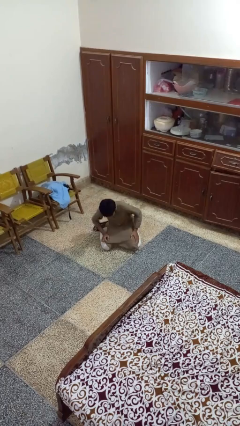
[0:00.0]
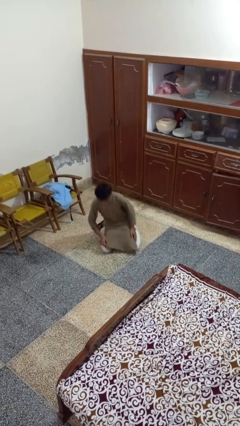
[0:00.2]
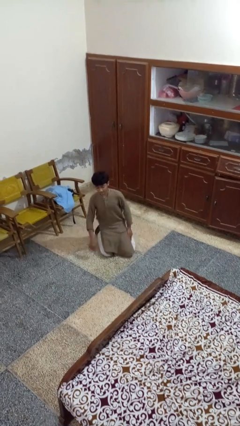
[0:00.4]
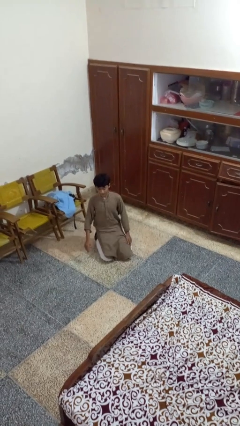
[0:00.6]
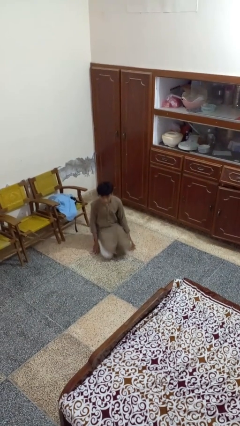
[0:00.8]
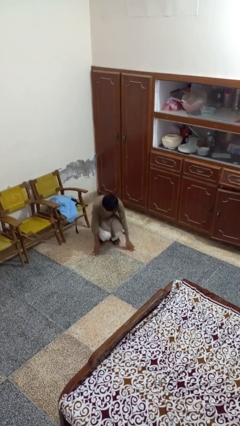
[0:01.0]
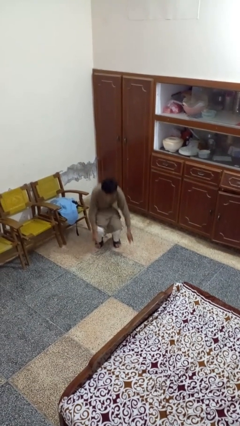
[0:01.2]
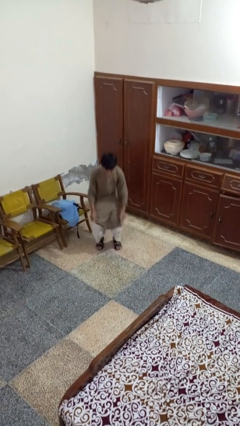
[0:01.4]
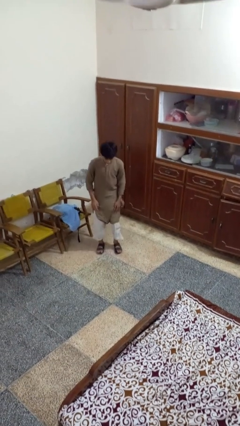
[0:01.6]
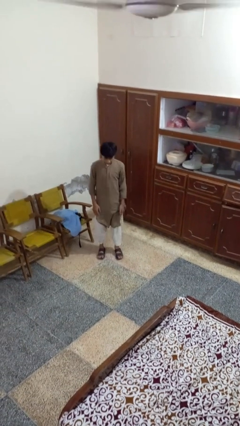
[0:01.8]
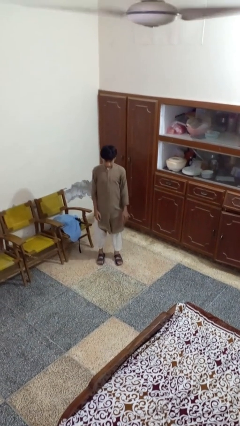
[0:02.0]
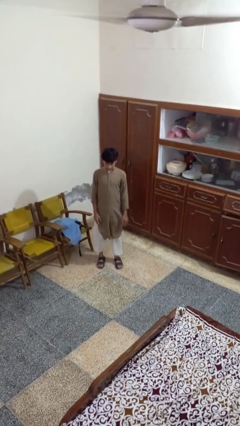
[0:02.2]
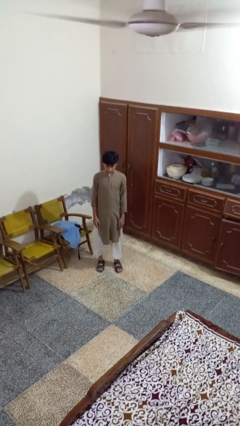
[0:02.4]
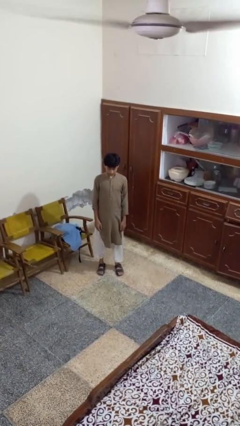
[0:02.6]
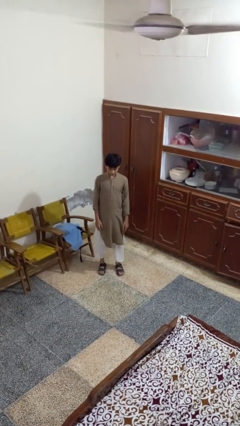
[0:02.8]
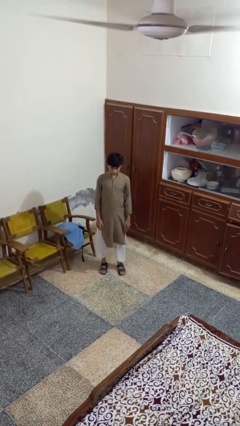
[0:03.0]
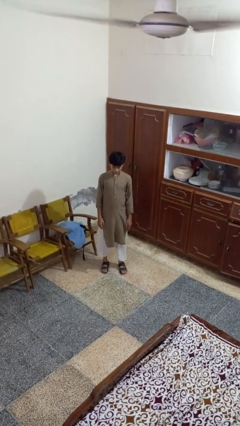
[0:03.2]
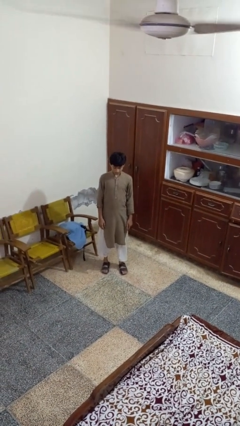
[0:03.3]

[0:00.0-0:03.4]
person stands up from floor

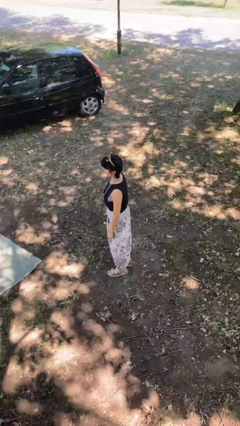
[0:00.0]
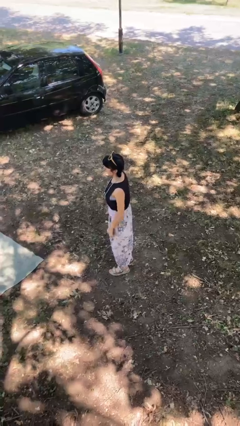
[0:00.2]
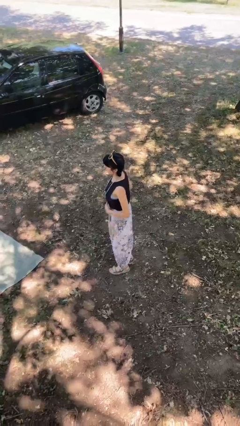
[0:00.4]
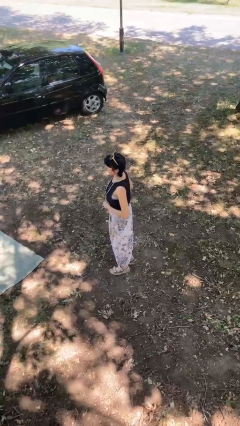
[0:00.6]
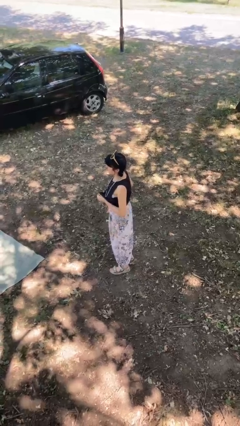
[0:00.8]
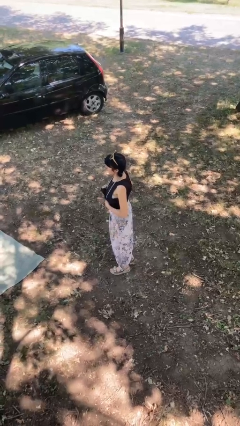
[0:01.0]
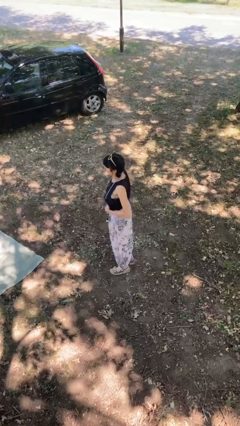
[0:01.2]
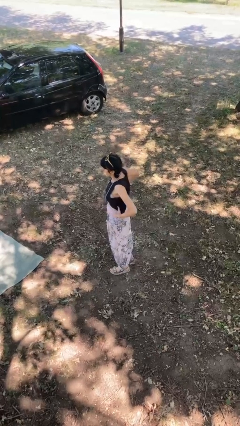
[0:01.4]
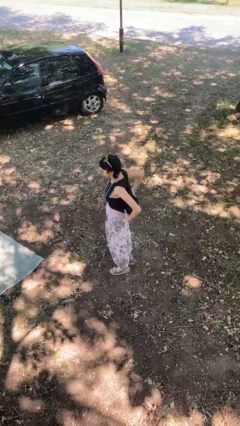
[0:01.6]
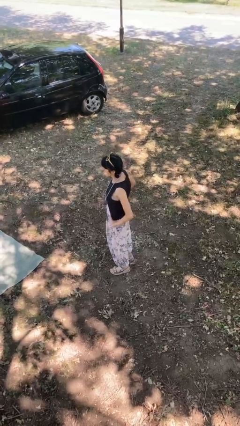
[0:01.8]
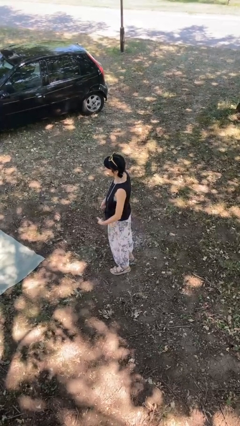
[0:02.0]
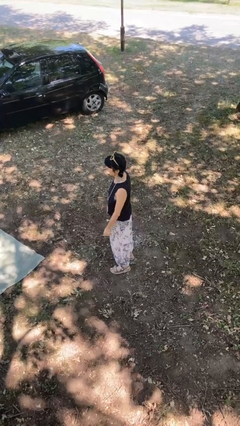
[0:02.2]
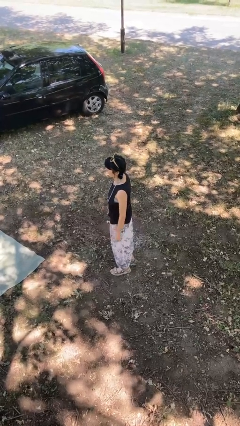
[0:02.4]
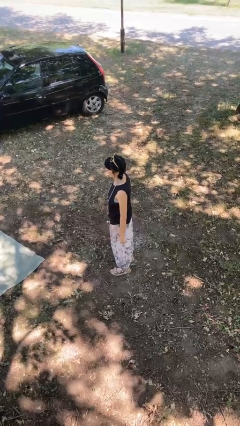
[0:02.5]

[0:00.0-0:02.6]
person untucks shirt

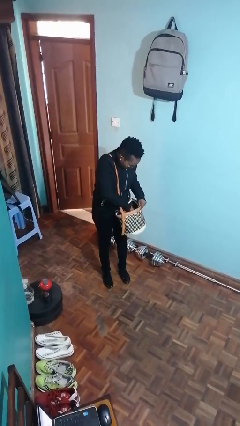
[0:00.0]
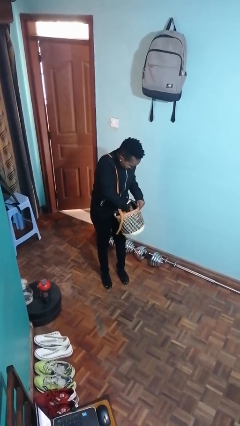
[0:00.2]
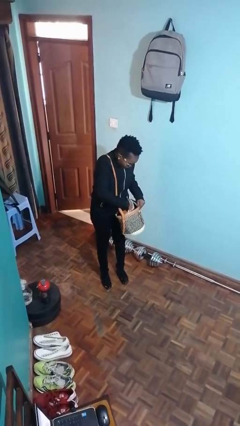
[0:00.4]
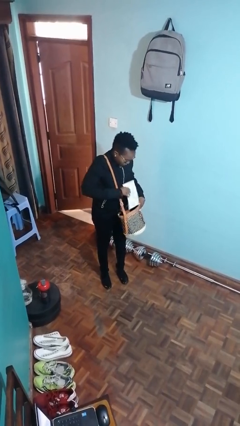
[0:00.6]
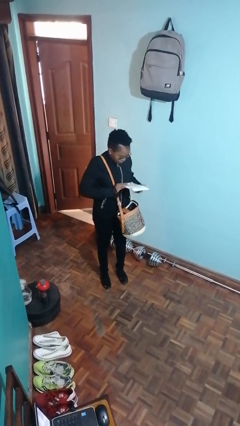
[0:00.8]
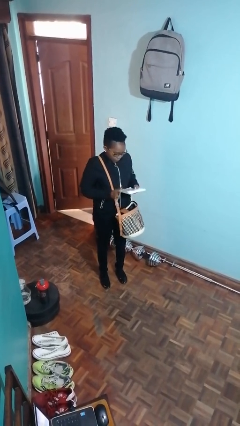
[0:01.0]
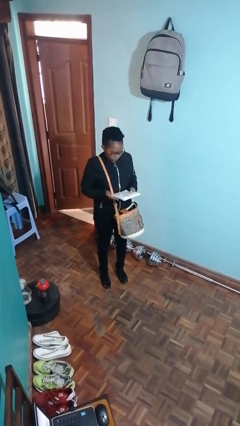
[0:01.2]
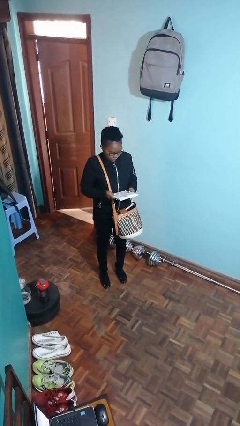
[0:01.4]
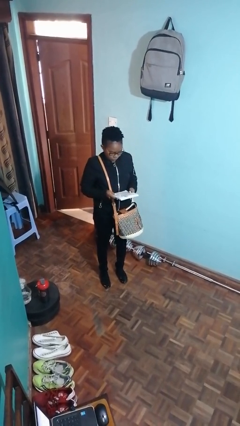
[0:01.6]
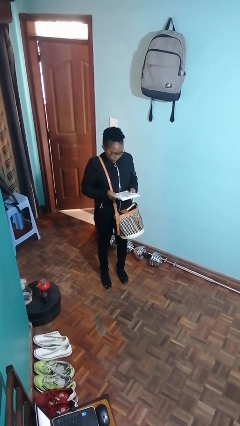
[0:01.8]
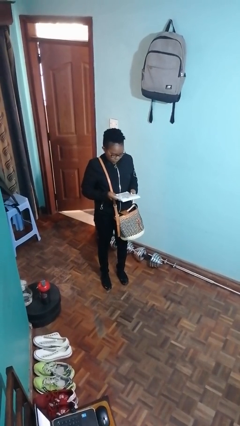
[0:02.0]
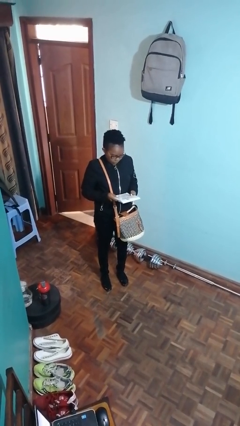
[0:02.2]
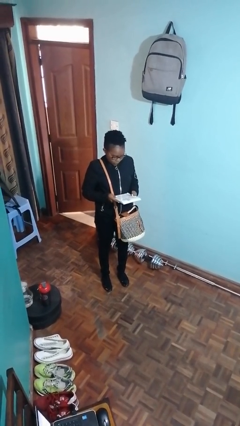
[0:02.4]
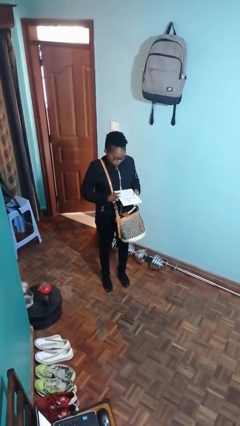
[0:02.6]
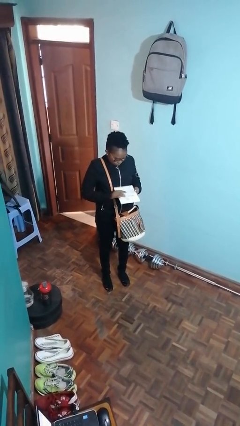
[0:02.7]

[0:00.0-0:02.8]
person takes object from purse

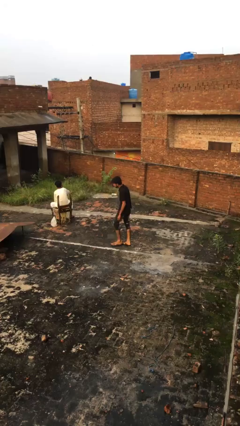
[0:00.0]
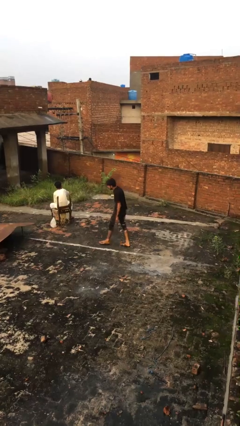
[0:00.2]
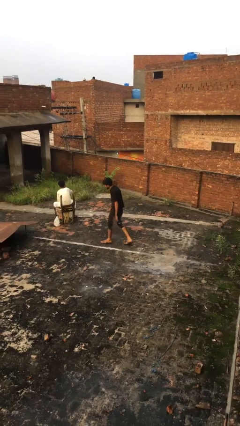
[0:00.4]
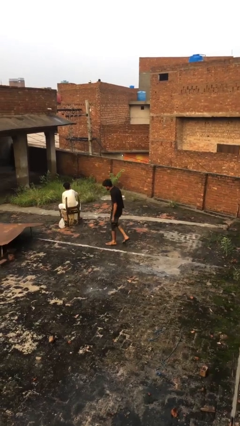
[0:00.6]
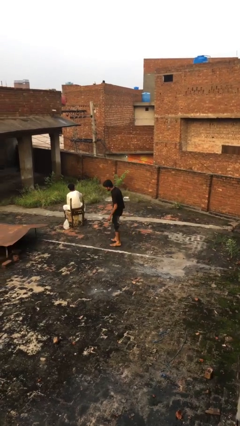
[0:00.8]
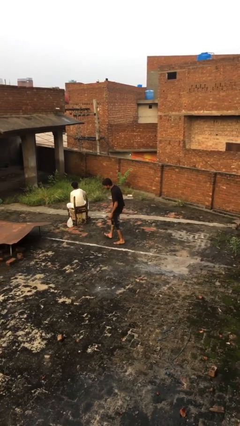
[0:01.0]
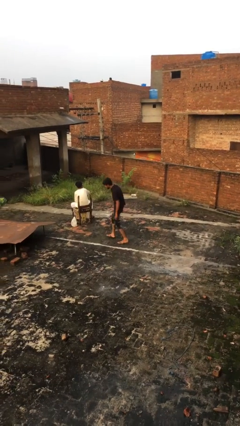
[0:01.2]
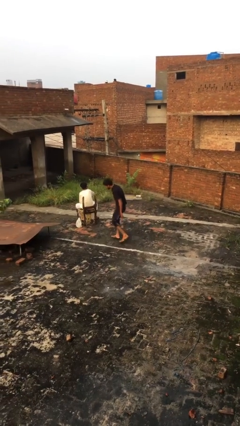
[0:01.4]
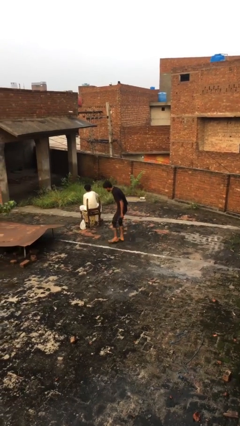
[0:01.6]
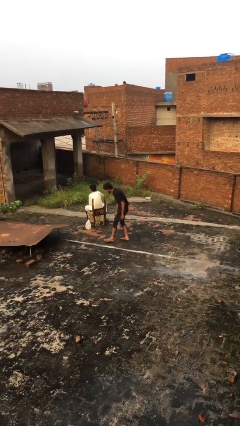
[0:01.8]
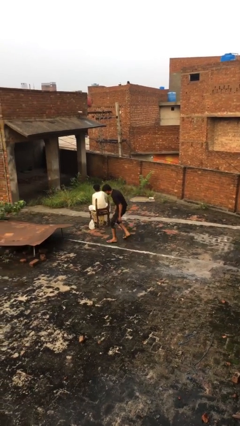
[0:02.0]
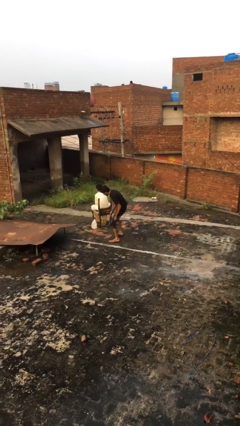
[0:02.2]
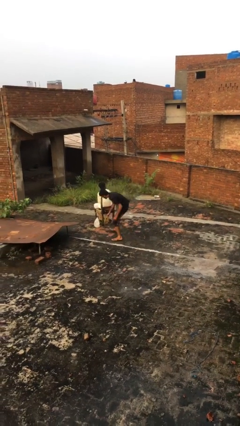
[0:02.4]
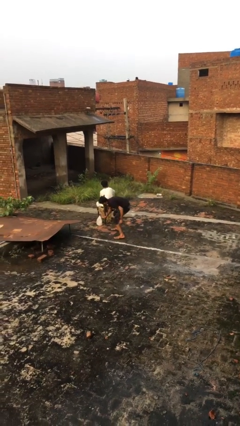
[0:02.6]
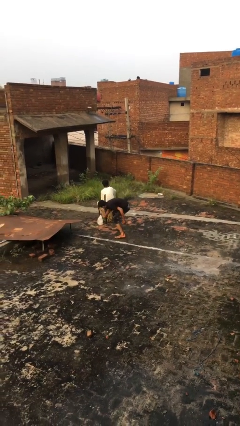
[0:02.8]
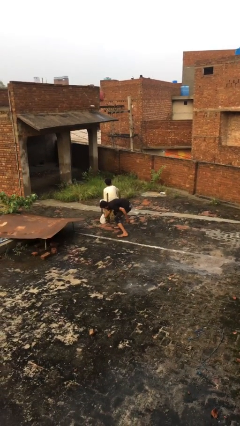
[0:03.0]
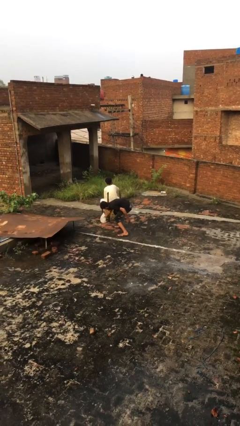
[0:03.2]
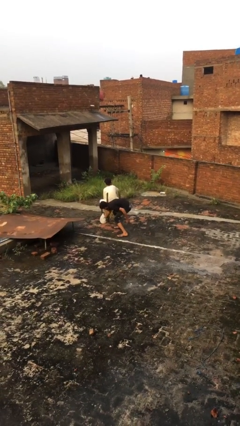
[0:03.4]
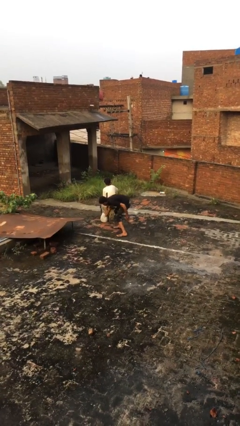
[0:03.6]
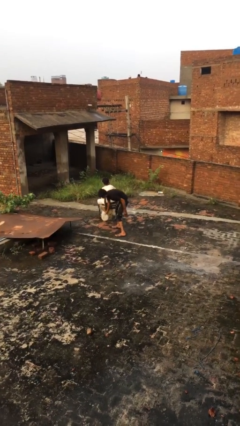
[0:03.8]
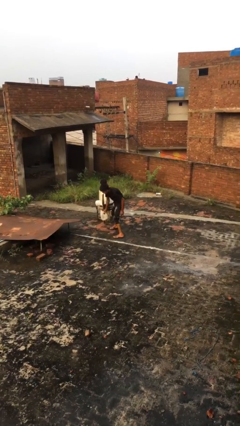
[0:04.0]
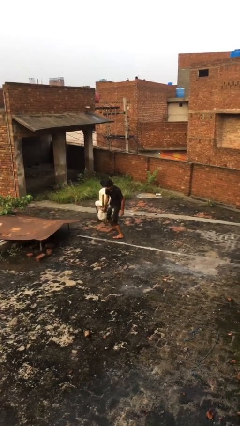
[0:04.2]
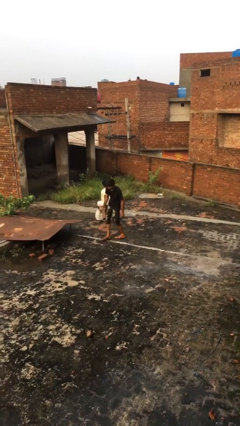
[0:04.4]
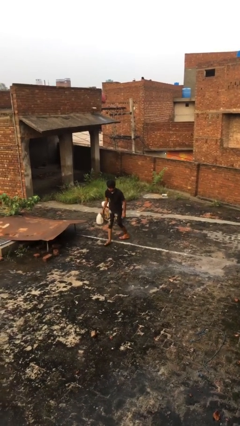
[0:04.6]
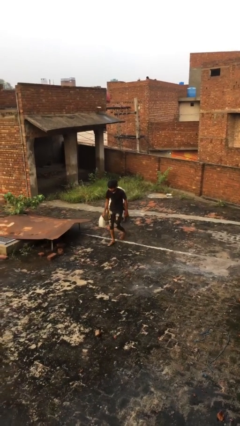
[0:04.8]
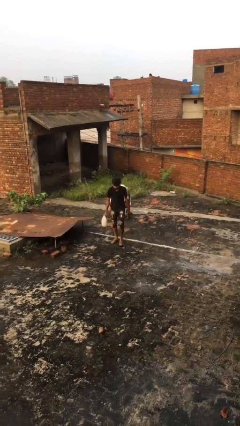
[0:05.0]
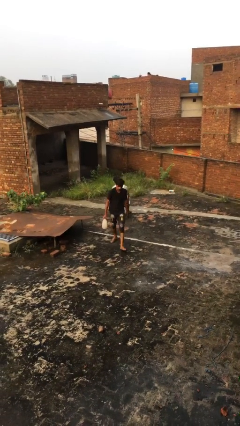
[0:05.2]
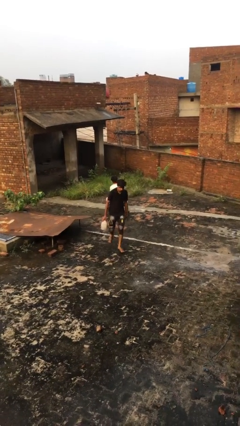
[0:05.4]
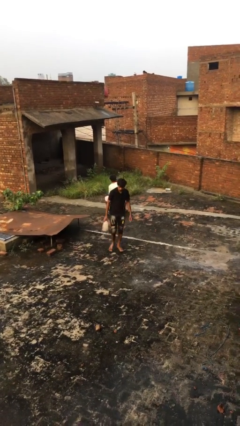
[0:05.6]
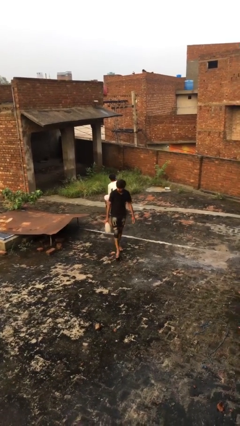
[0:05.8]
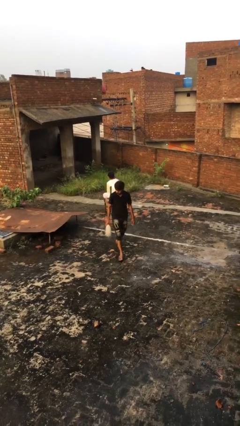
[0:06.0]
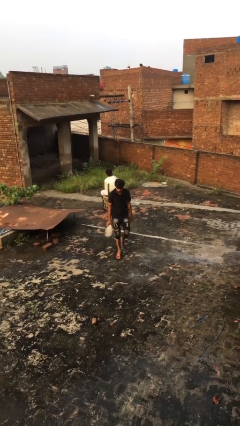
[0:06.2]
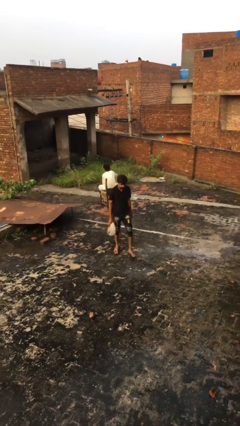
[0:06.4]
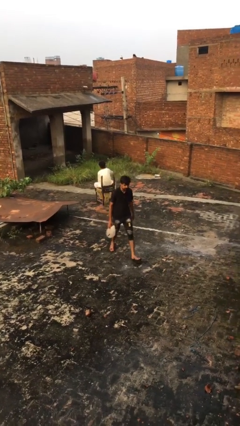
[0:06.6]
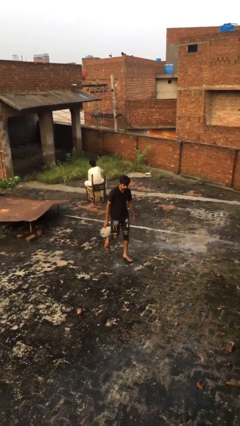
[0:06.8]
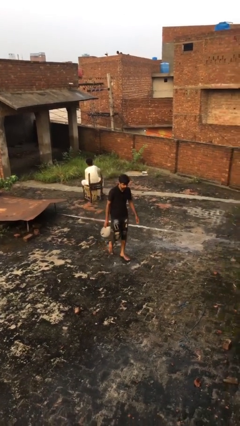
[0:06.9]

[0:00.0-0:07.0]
person steals object from person

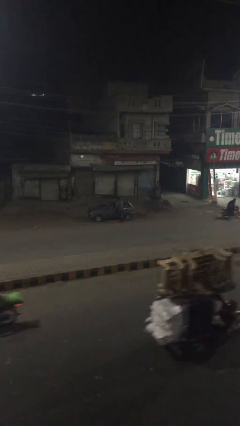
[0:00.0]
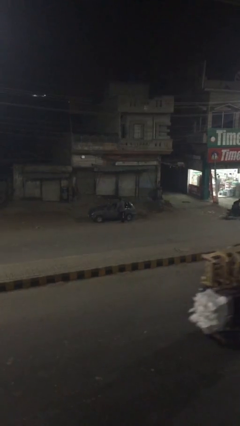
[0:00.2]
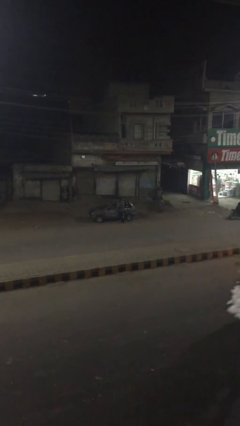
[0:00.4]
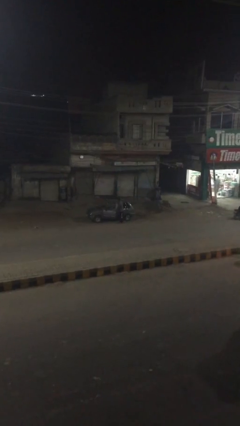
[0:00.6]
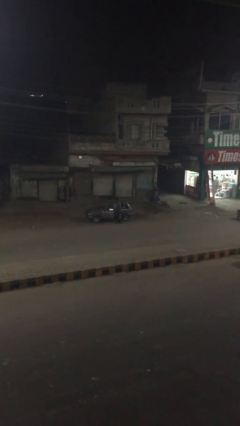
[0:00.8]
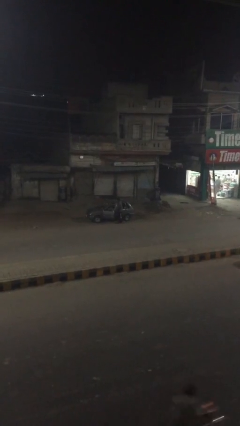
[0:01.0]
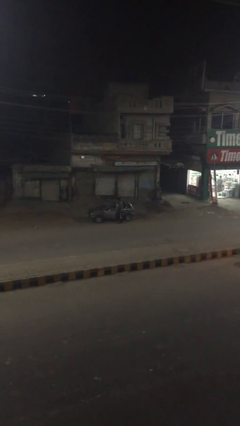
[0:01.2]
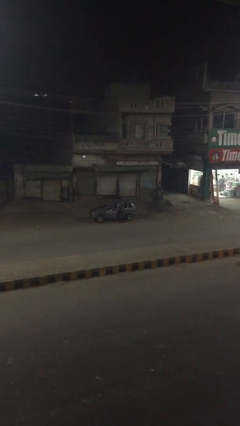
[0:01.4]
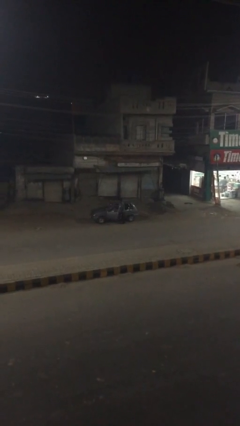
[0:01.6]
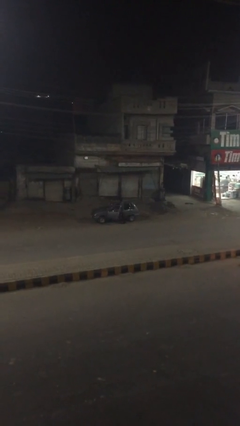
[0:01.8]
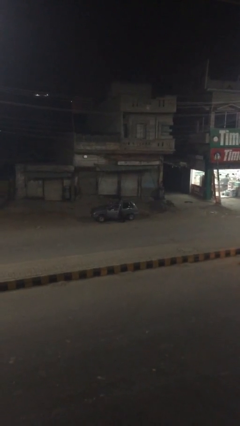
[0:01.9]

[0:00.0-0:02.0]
person opens car door
